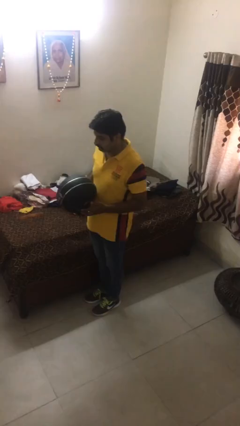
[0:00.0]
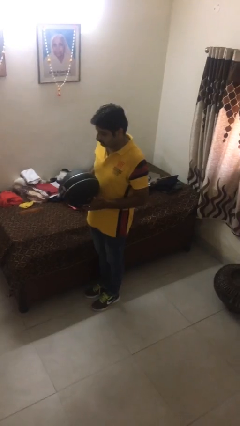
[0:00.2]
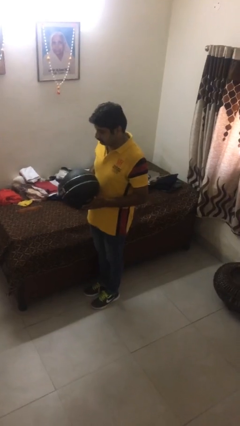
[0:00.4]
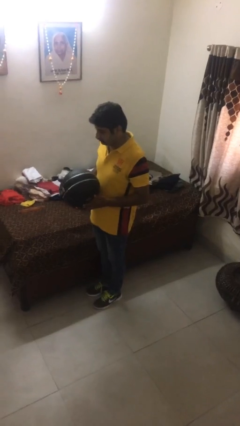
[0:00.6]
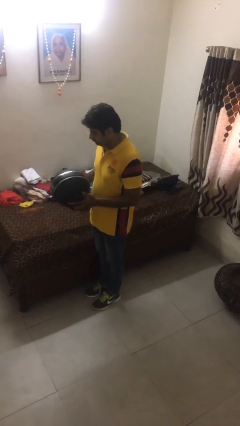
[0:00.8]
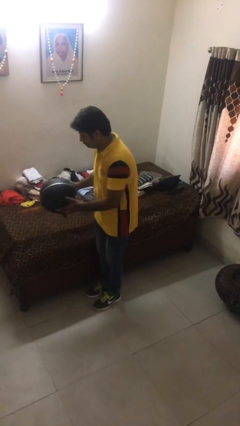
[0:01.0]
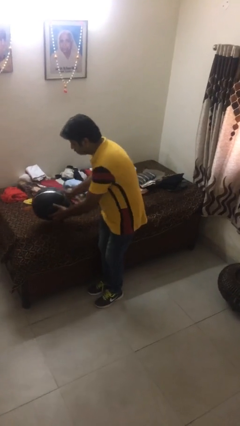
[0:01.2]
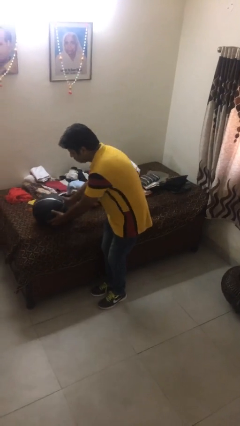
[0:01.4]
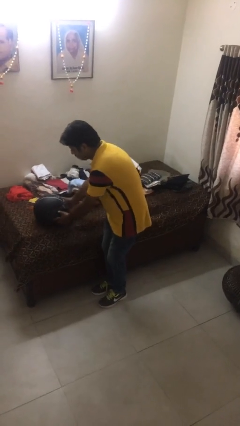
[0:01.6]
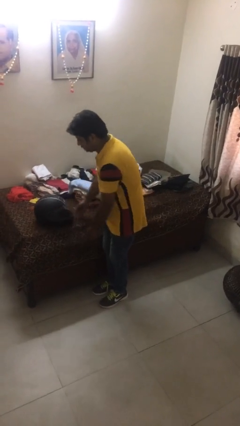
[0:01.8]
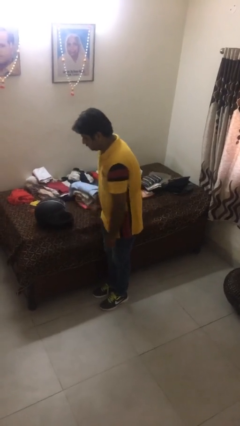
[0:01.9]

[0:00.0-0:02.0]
person puts down object on bed

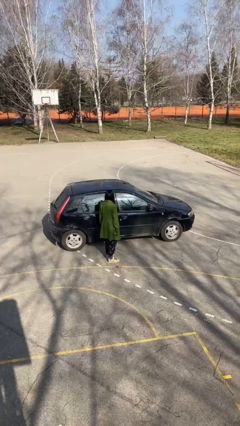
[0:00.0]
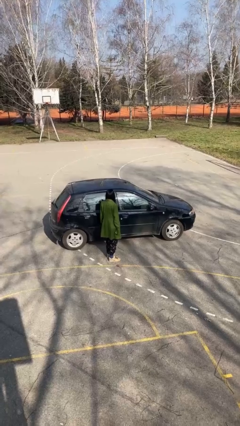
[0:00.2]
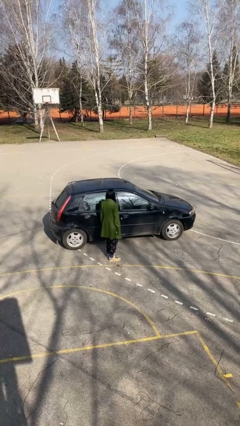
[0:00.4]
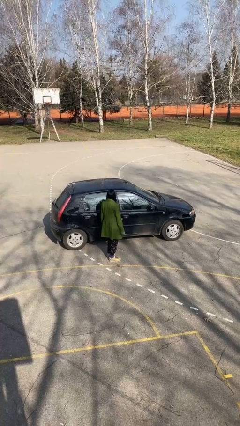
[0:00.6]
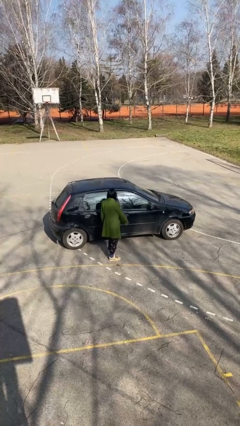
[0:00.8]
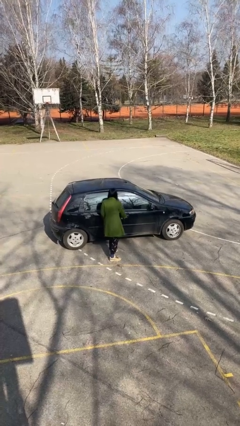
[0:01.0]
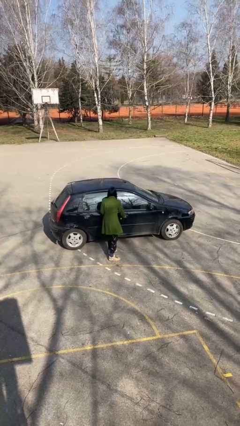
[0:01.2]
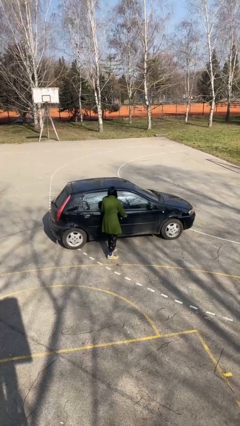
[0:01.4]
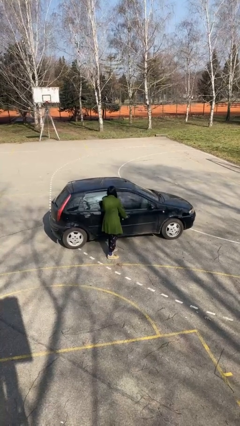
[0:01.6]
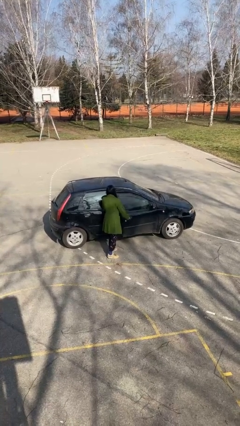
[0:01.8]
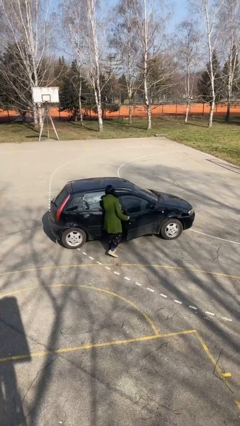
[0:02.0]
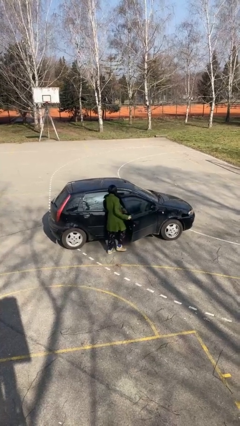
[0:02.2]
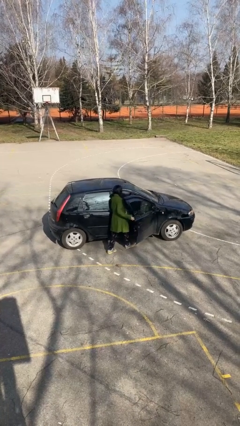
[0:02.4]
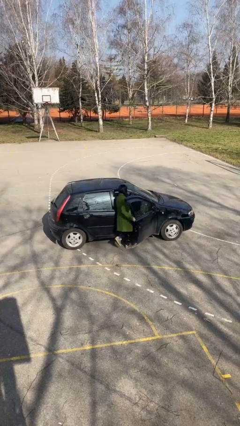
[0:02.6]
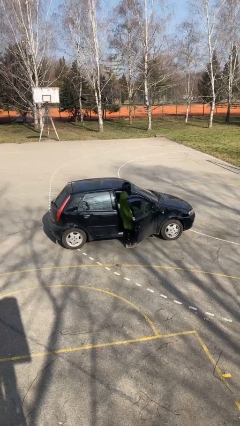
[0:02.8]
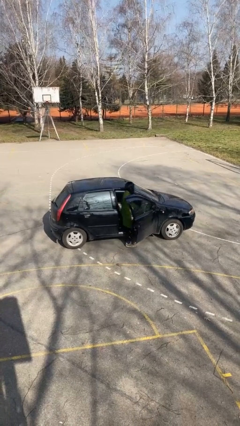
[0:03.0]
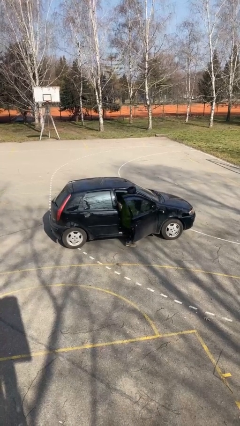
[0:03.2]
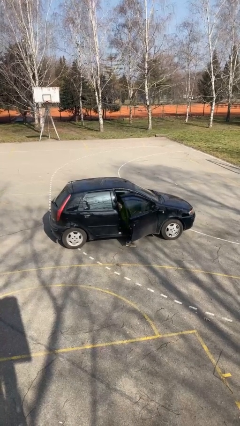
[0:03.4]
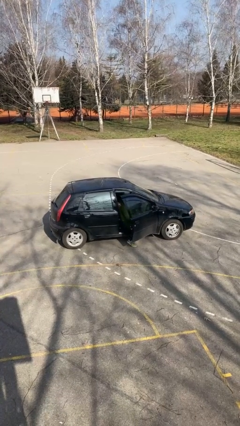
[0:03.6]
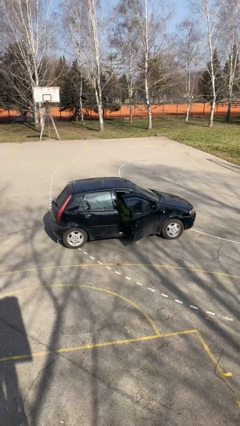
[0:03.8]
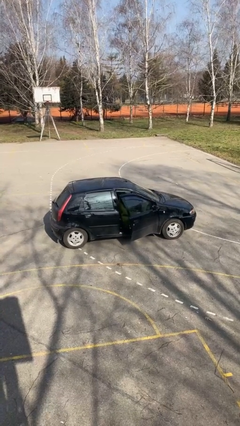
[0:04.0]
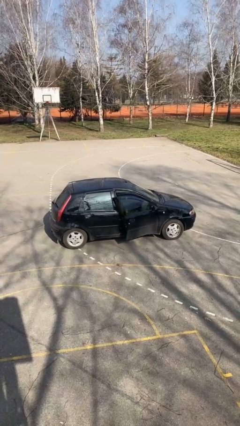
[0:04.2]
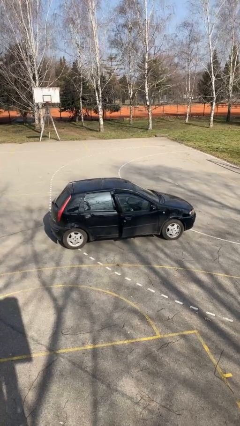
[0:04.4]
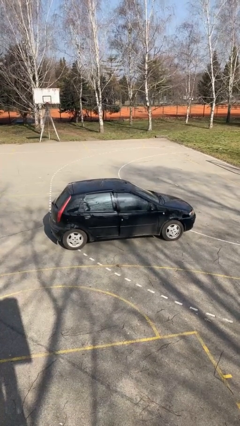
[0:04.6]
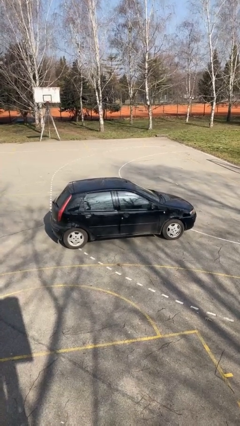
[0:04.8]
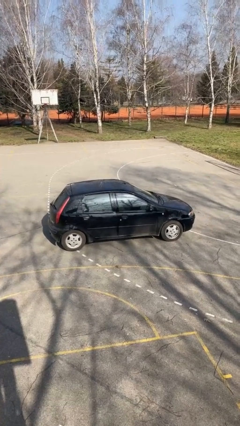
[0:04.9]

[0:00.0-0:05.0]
car picks up person

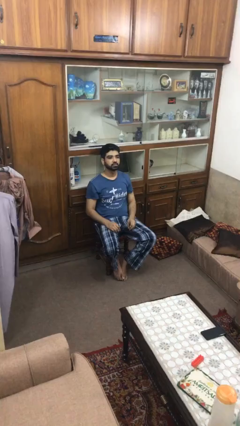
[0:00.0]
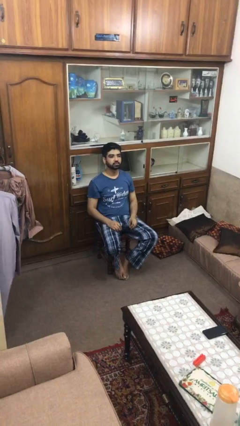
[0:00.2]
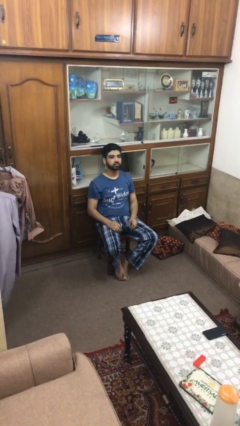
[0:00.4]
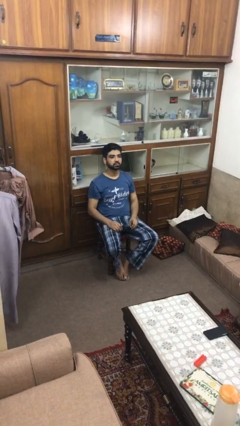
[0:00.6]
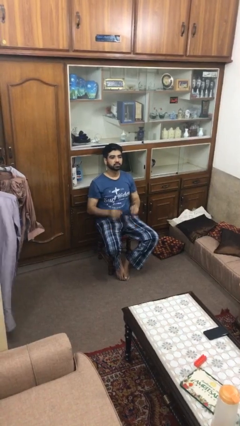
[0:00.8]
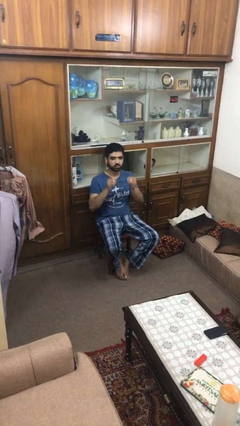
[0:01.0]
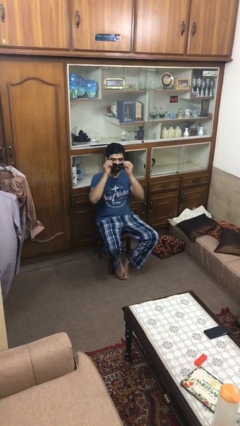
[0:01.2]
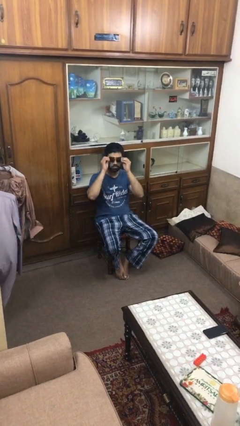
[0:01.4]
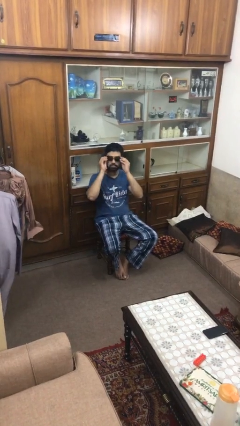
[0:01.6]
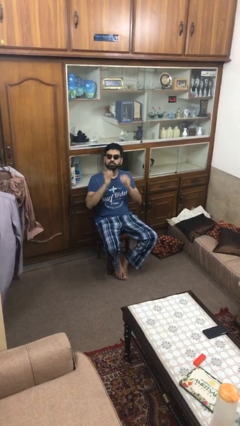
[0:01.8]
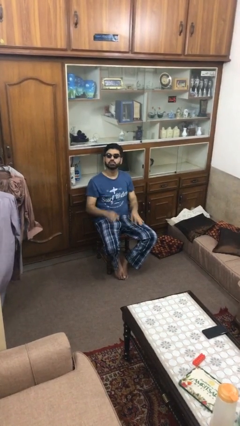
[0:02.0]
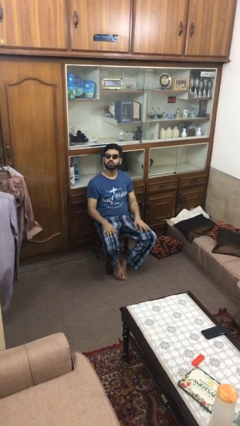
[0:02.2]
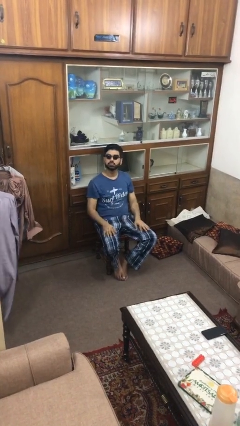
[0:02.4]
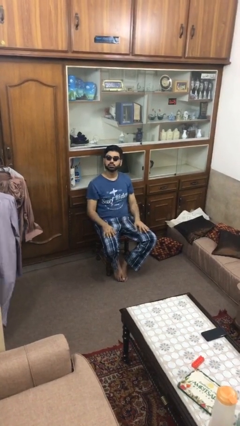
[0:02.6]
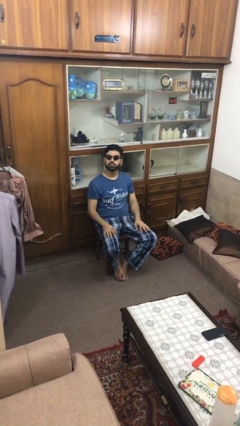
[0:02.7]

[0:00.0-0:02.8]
person puts on sunglasses

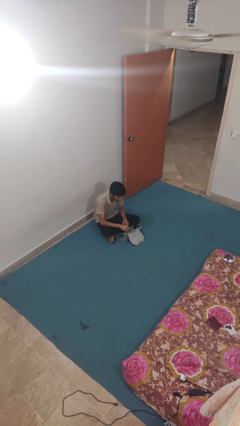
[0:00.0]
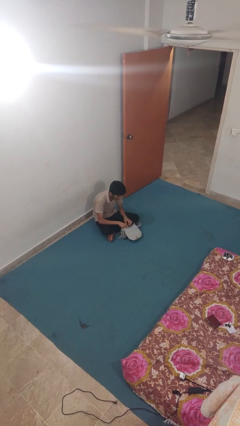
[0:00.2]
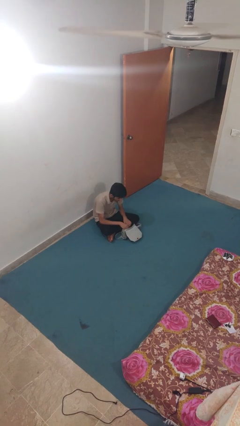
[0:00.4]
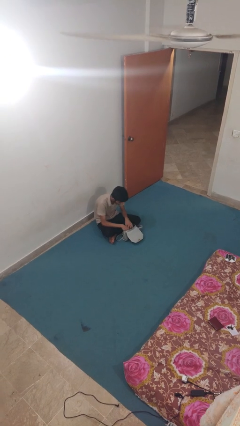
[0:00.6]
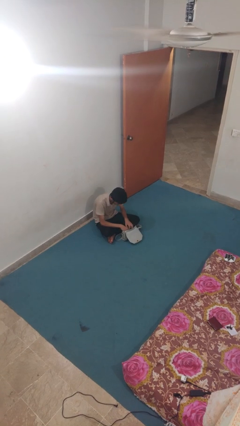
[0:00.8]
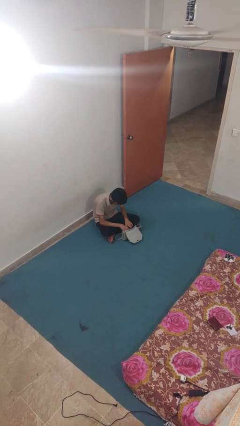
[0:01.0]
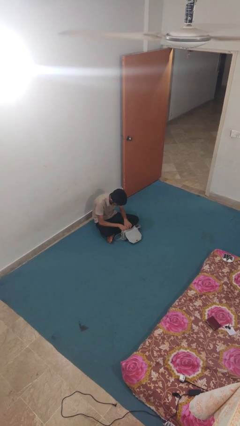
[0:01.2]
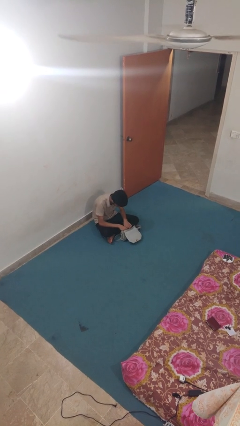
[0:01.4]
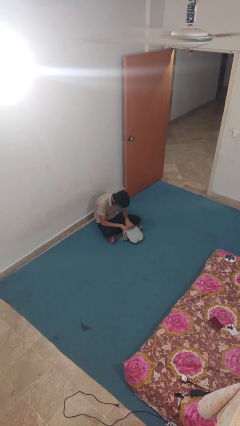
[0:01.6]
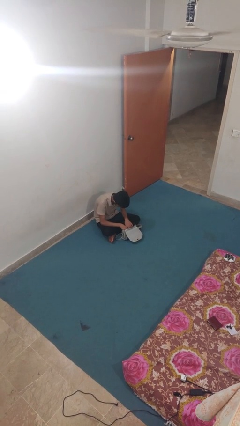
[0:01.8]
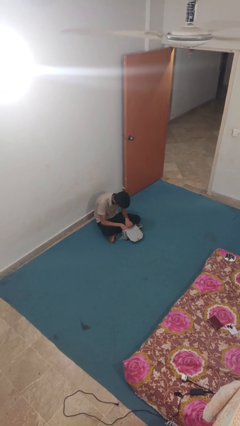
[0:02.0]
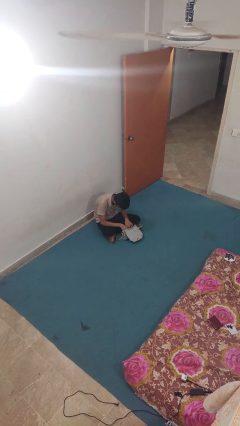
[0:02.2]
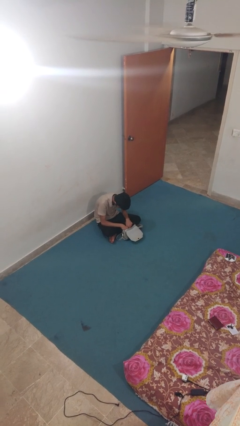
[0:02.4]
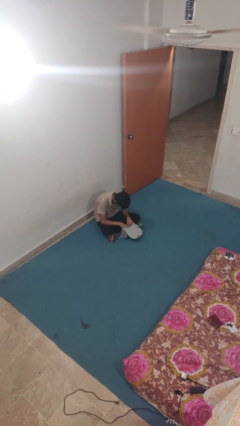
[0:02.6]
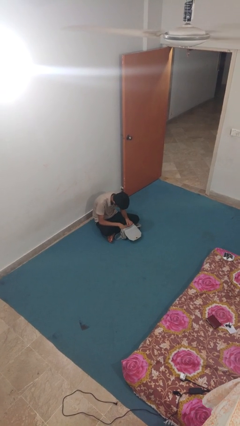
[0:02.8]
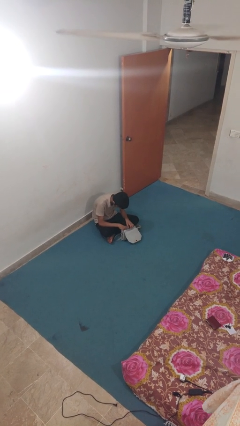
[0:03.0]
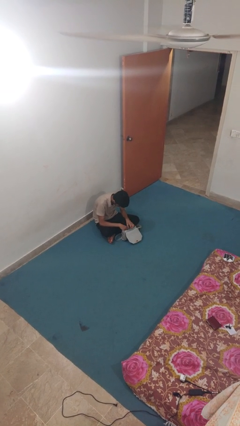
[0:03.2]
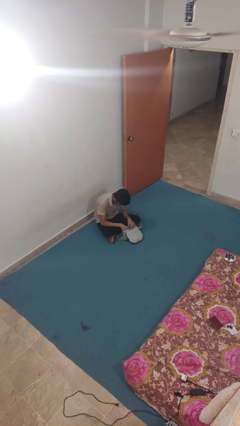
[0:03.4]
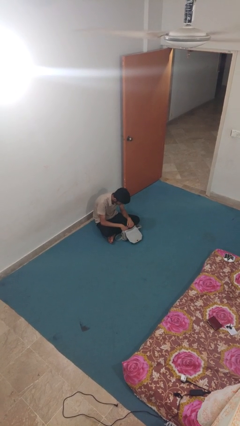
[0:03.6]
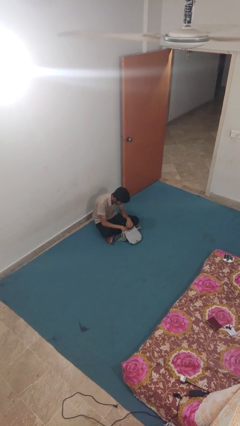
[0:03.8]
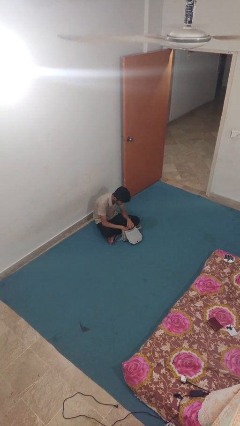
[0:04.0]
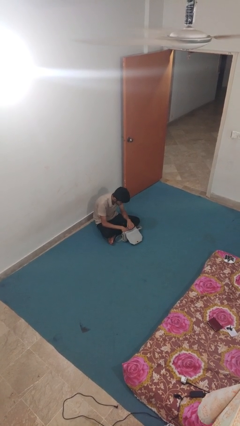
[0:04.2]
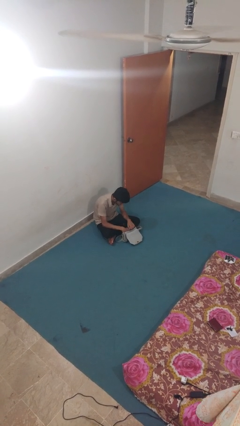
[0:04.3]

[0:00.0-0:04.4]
person searches in purse

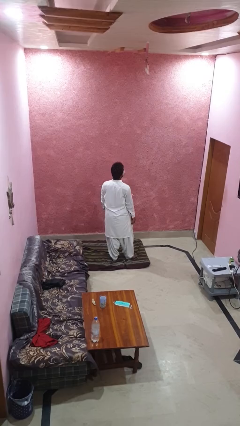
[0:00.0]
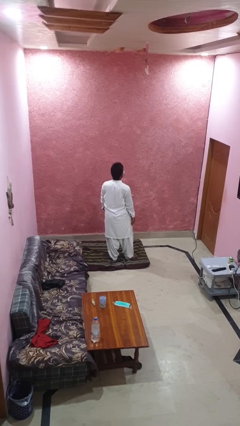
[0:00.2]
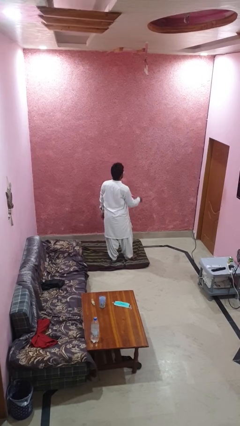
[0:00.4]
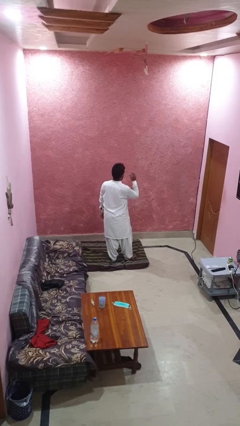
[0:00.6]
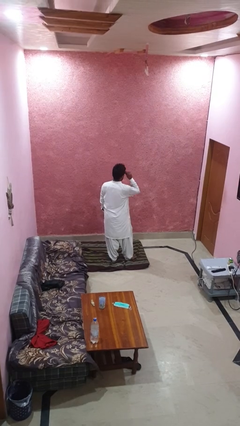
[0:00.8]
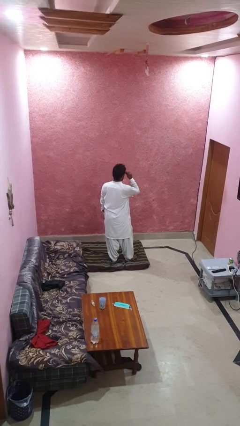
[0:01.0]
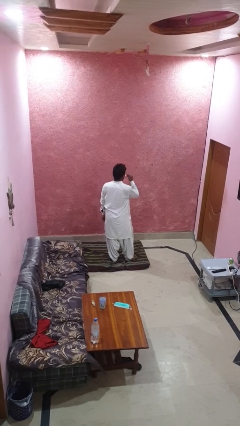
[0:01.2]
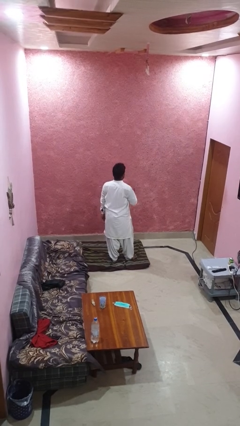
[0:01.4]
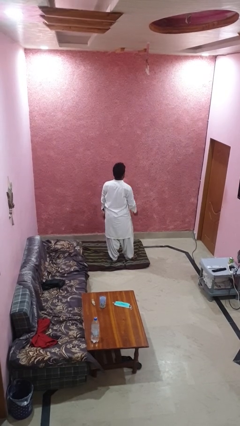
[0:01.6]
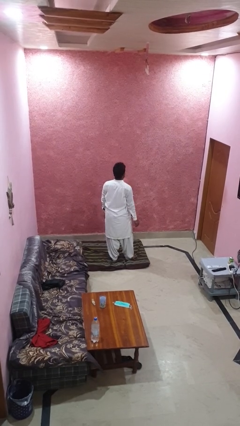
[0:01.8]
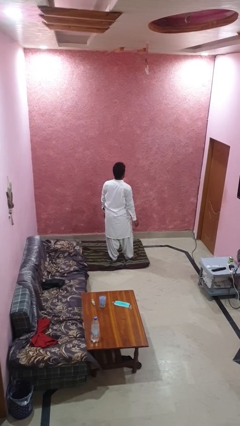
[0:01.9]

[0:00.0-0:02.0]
person takes off glasses

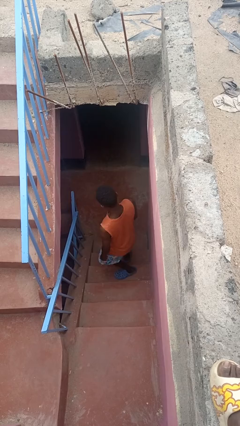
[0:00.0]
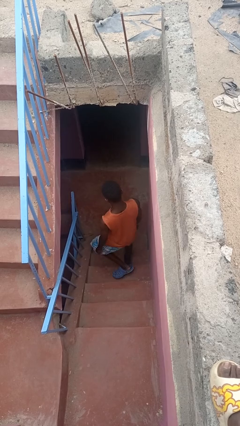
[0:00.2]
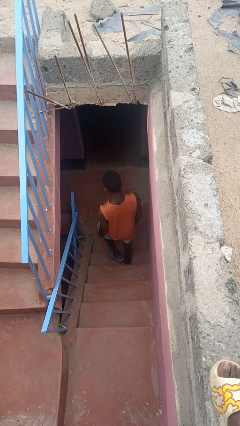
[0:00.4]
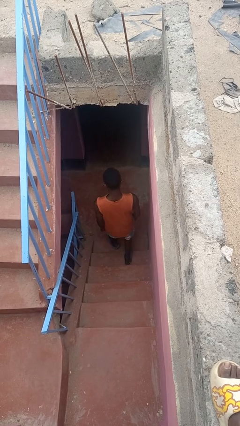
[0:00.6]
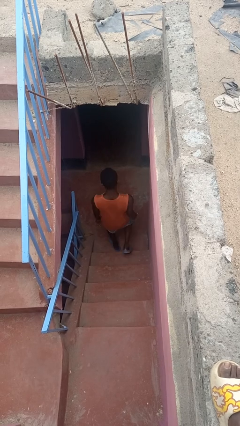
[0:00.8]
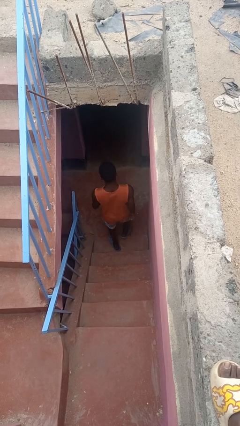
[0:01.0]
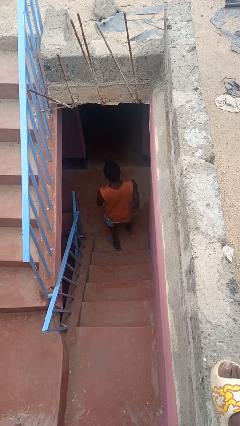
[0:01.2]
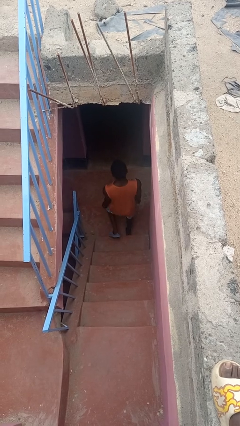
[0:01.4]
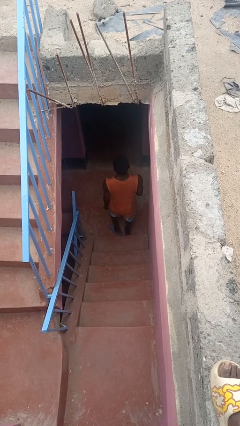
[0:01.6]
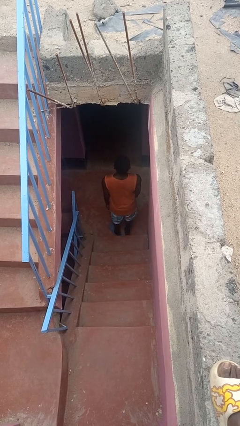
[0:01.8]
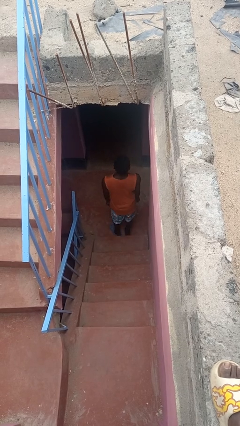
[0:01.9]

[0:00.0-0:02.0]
person climbs down stairs
